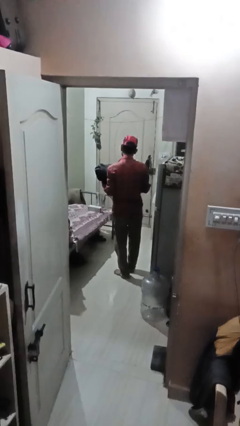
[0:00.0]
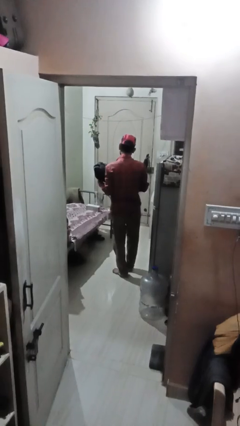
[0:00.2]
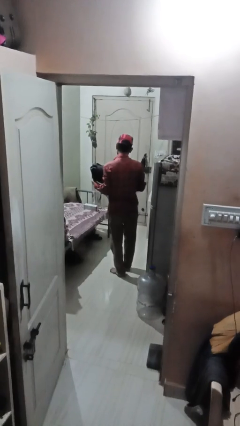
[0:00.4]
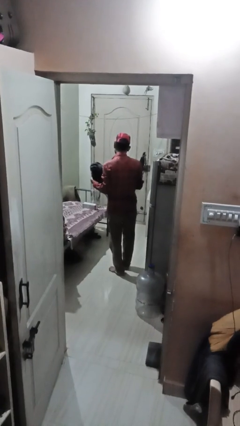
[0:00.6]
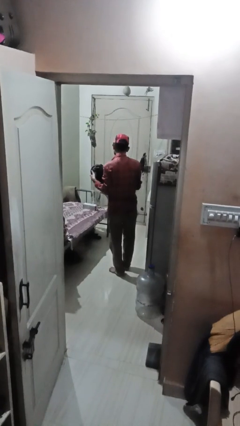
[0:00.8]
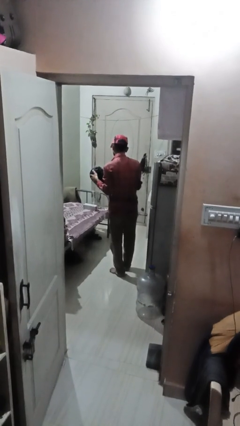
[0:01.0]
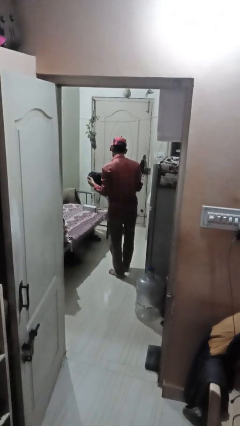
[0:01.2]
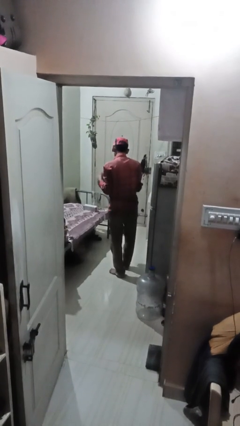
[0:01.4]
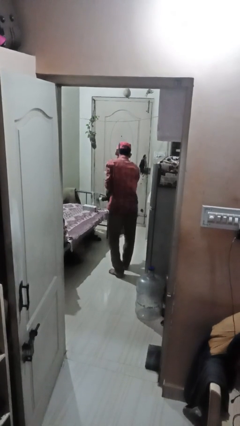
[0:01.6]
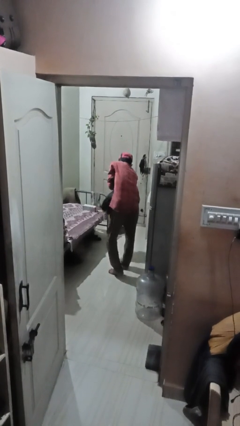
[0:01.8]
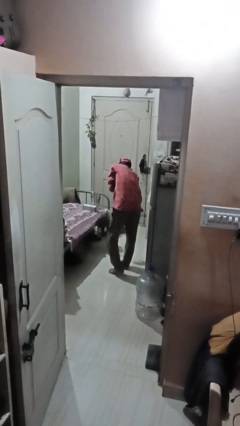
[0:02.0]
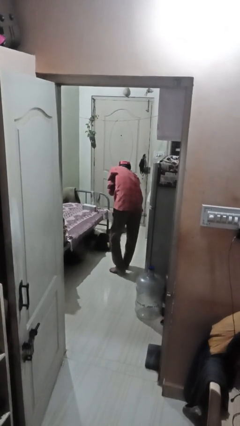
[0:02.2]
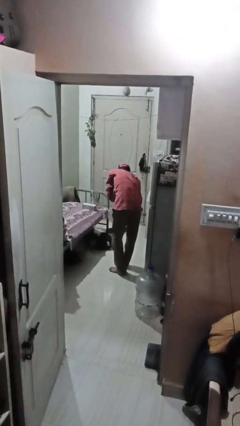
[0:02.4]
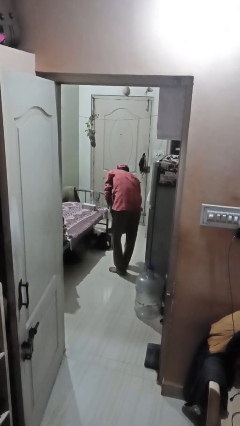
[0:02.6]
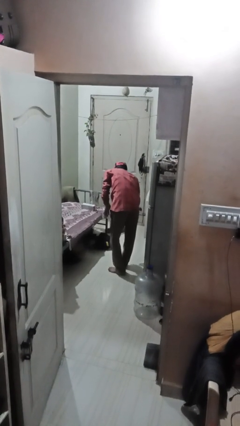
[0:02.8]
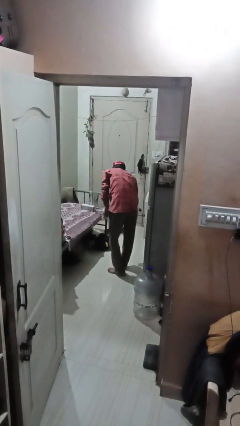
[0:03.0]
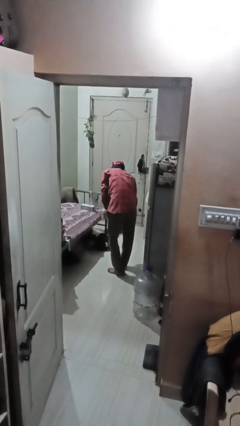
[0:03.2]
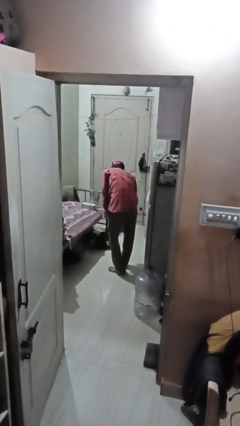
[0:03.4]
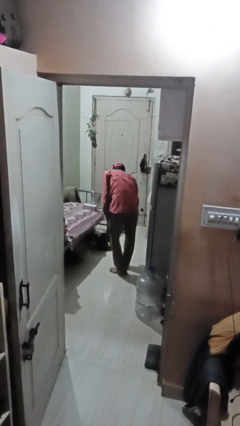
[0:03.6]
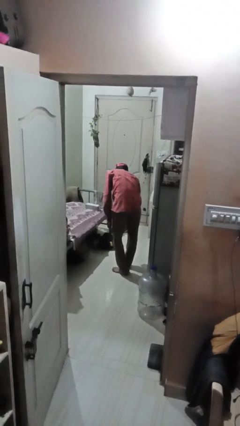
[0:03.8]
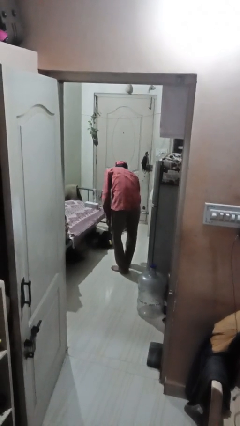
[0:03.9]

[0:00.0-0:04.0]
person drops object

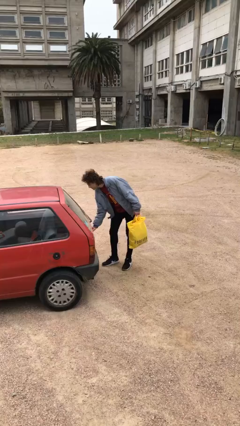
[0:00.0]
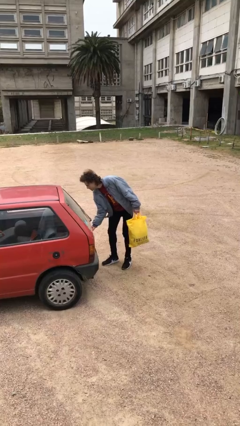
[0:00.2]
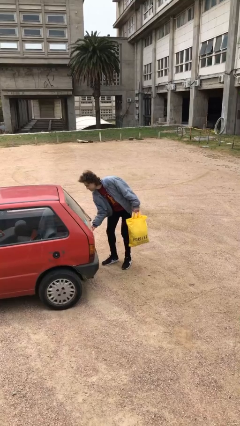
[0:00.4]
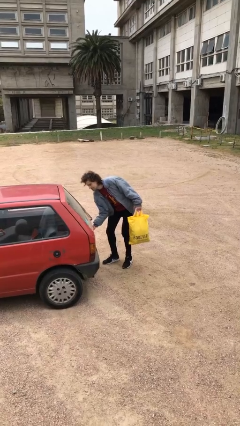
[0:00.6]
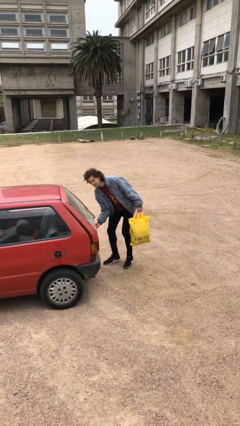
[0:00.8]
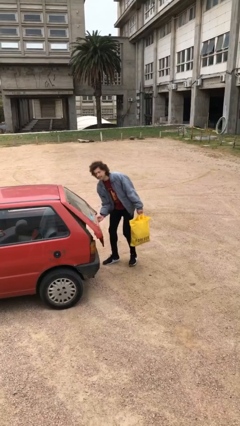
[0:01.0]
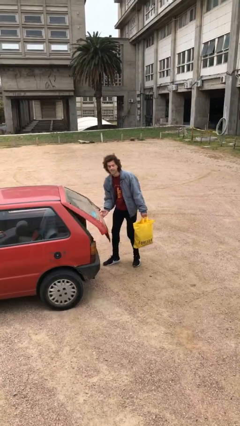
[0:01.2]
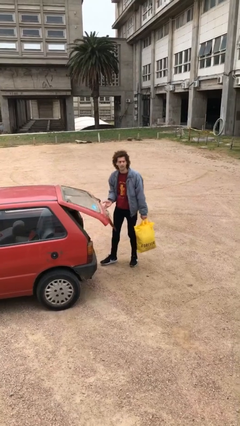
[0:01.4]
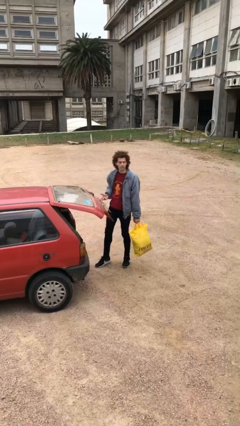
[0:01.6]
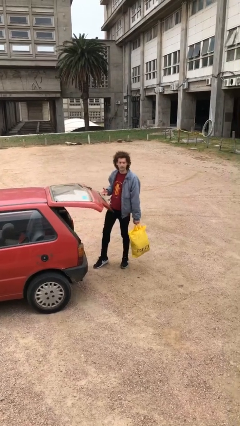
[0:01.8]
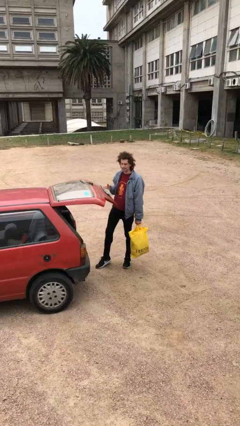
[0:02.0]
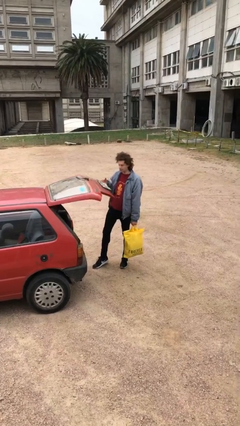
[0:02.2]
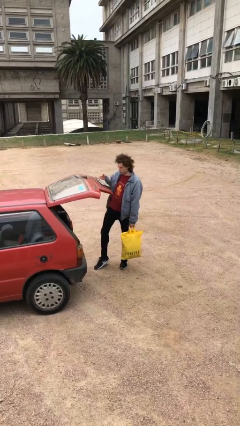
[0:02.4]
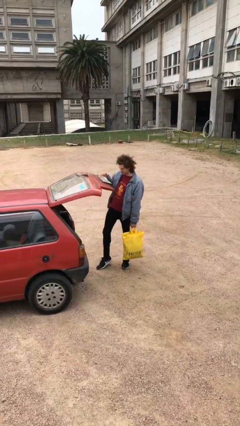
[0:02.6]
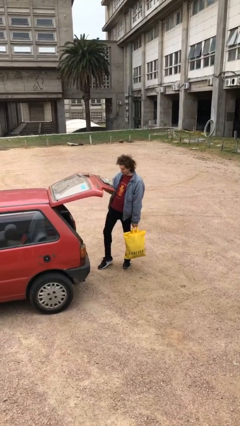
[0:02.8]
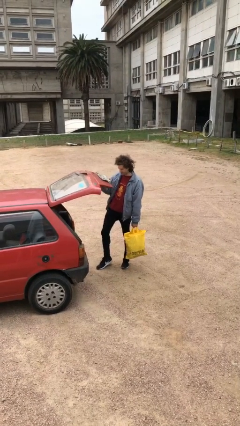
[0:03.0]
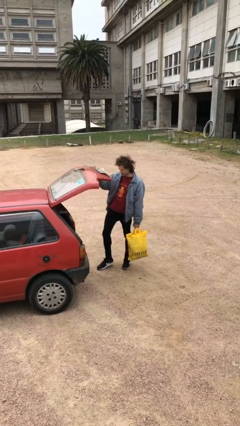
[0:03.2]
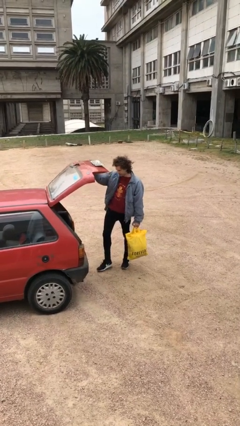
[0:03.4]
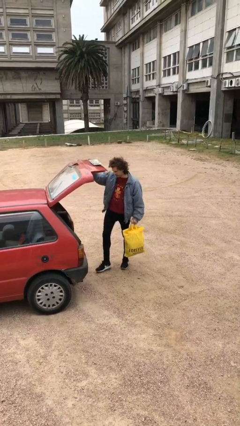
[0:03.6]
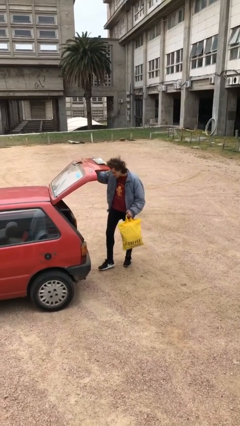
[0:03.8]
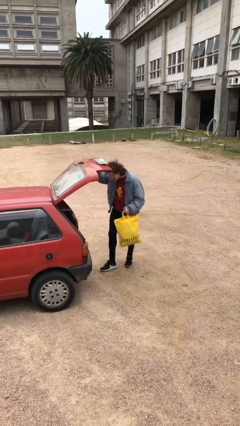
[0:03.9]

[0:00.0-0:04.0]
person opens car trunk

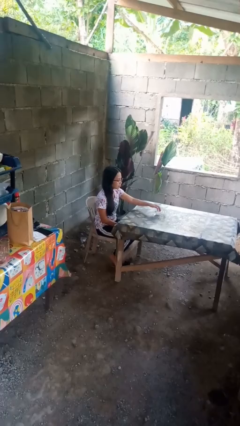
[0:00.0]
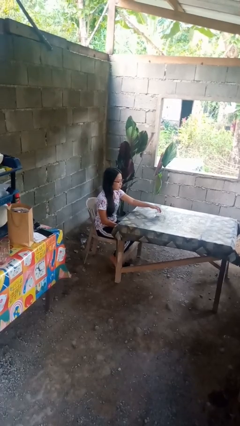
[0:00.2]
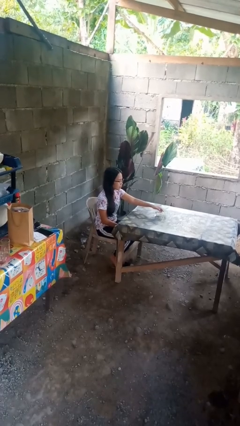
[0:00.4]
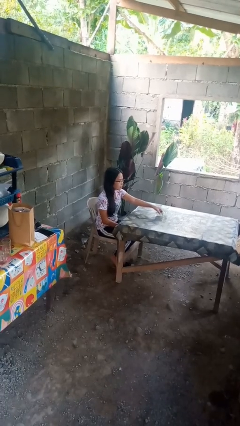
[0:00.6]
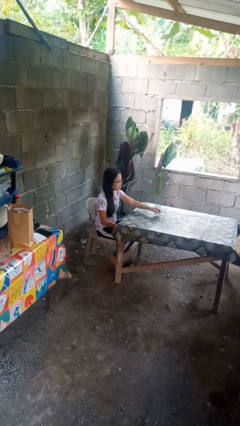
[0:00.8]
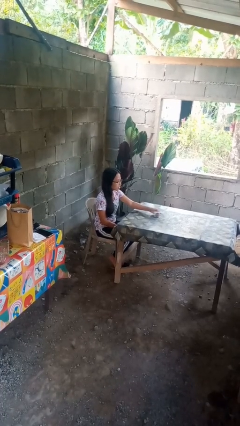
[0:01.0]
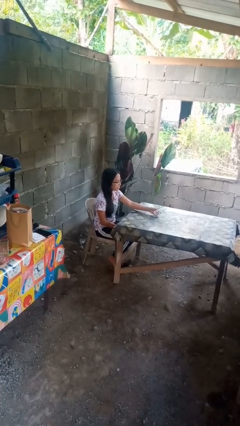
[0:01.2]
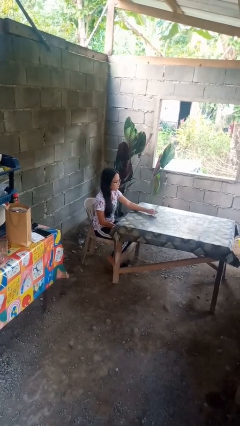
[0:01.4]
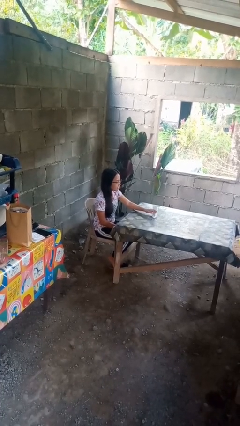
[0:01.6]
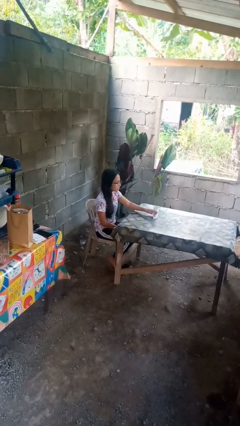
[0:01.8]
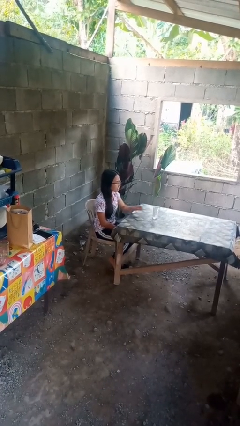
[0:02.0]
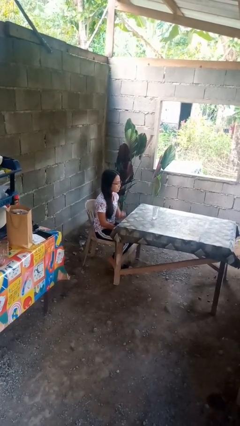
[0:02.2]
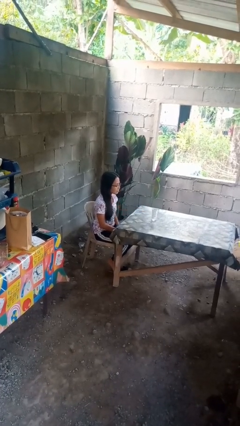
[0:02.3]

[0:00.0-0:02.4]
person sets upright glass

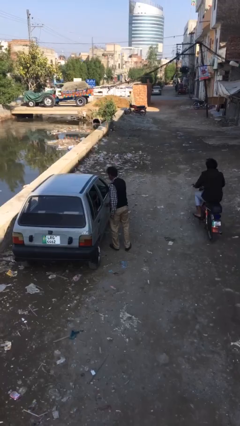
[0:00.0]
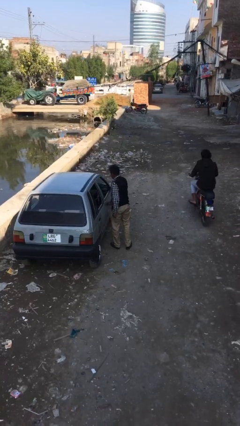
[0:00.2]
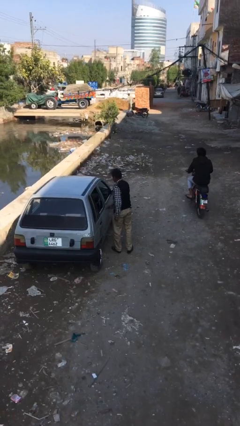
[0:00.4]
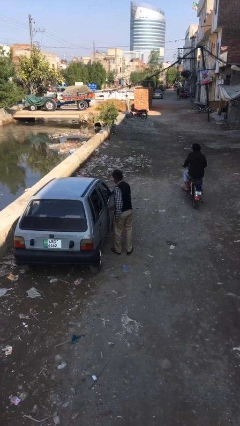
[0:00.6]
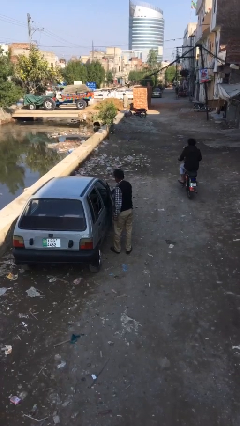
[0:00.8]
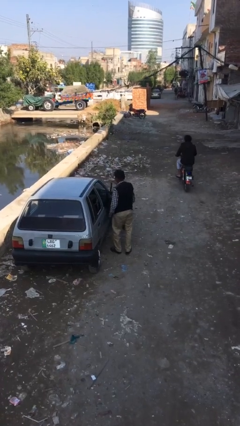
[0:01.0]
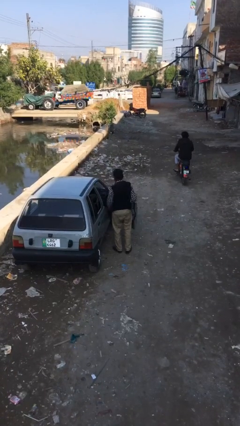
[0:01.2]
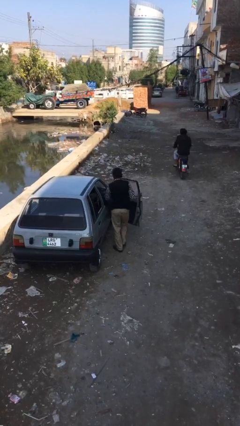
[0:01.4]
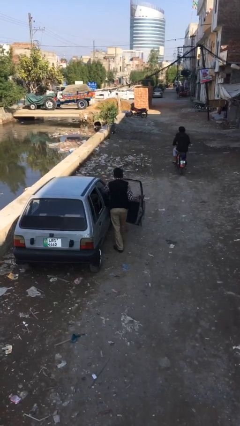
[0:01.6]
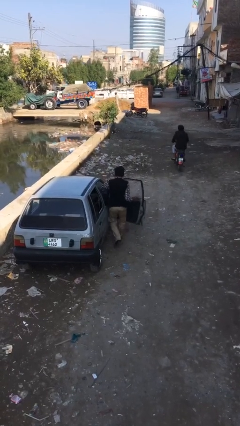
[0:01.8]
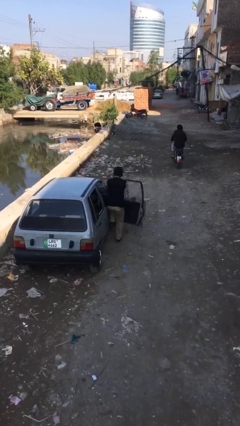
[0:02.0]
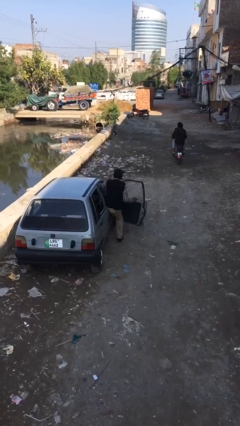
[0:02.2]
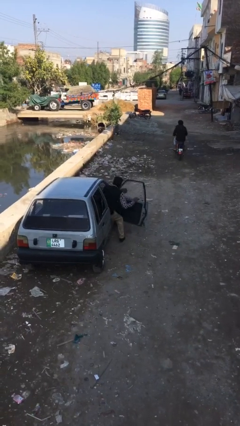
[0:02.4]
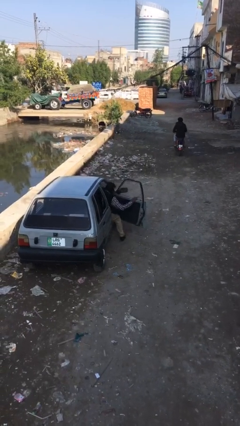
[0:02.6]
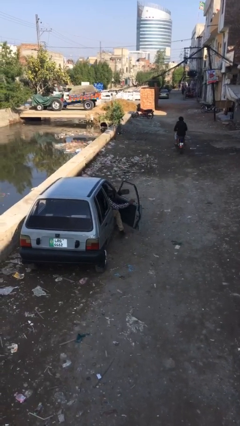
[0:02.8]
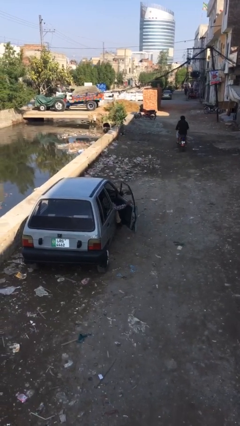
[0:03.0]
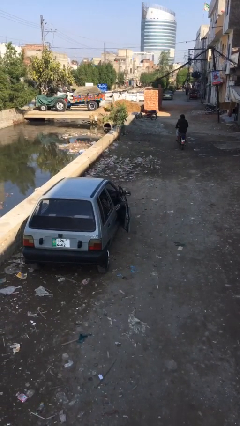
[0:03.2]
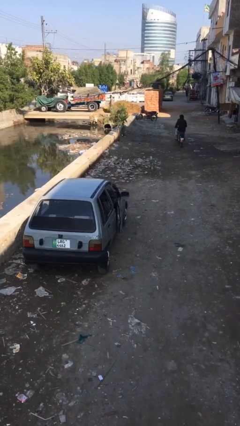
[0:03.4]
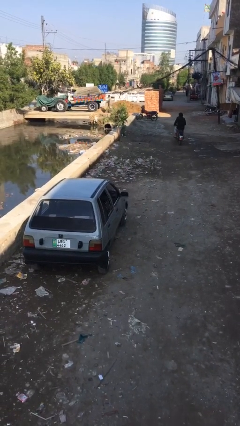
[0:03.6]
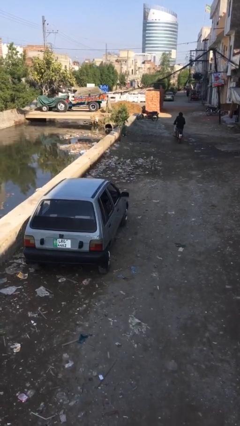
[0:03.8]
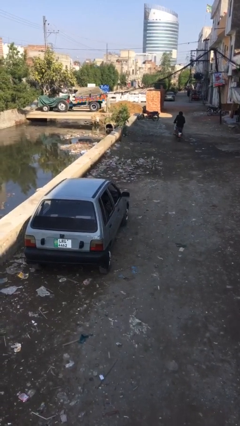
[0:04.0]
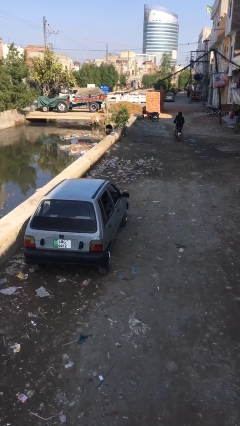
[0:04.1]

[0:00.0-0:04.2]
person enters car

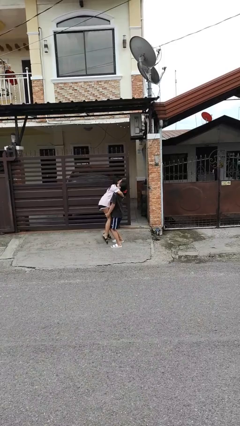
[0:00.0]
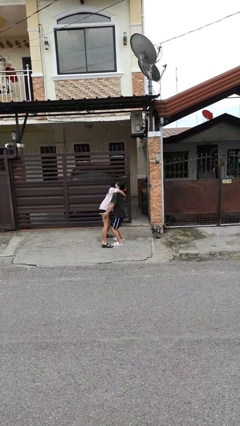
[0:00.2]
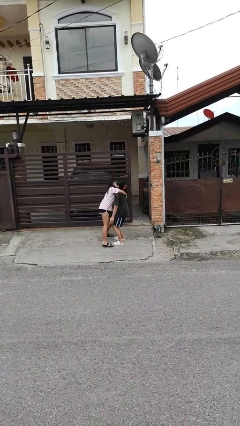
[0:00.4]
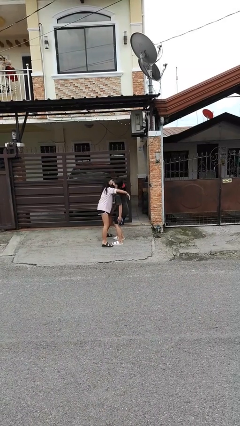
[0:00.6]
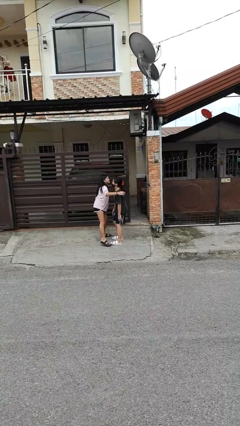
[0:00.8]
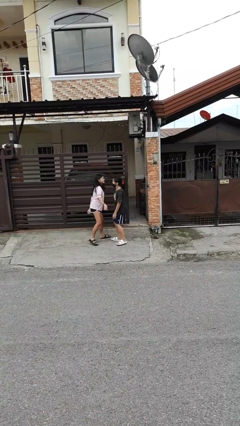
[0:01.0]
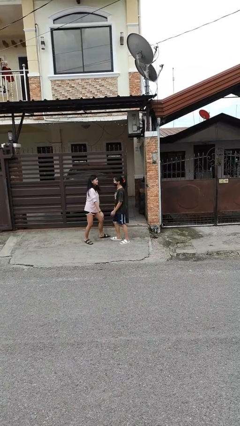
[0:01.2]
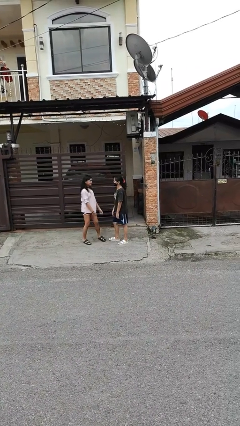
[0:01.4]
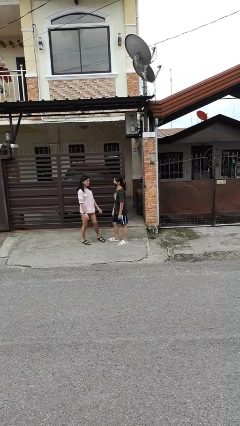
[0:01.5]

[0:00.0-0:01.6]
person puts down person

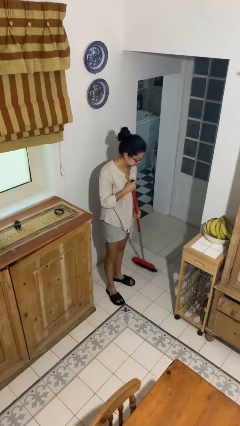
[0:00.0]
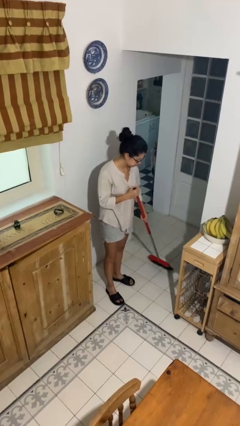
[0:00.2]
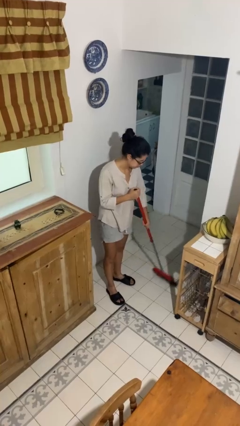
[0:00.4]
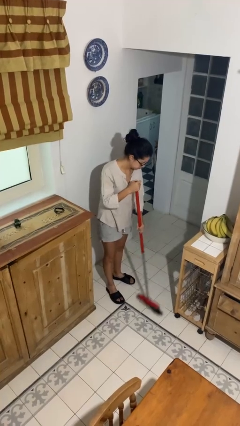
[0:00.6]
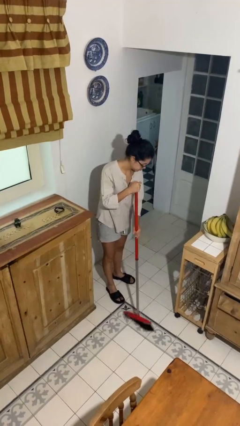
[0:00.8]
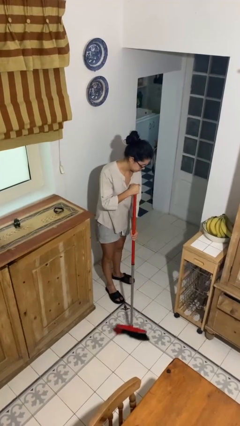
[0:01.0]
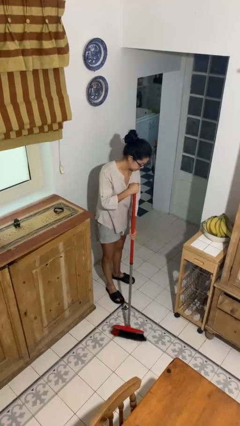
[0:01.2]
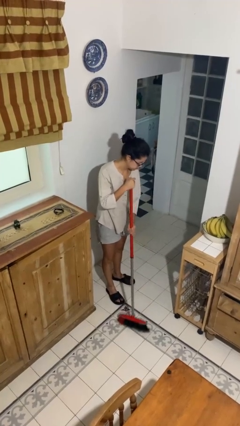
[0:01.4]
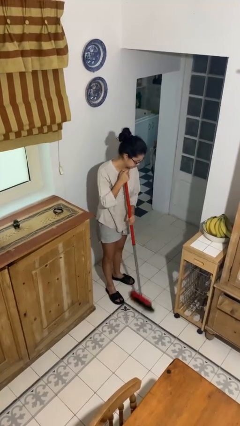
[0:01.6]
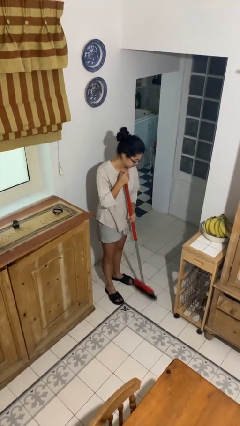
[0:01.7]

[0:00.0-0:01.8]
person sweeps floor
